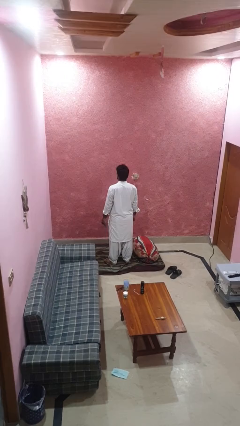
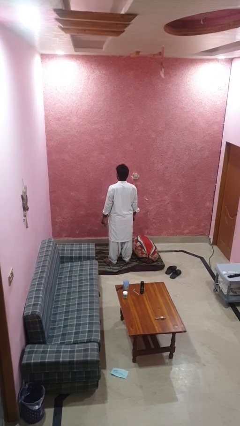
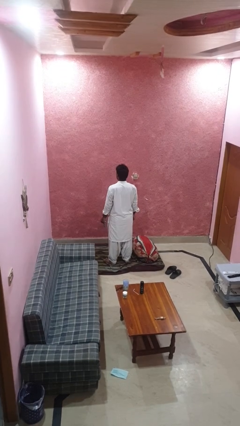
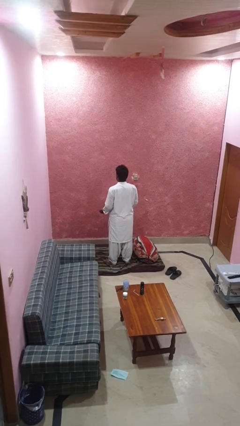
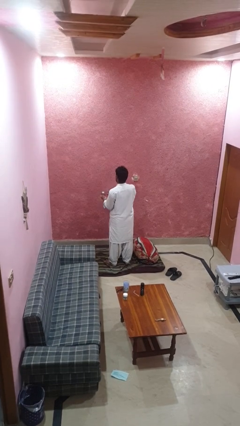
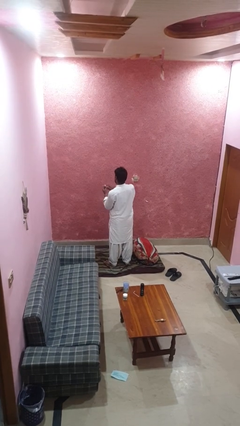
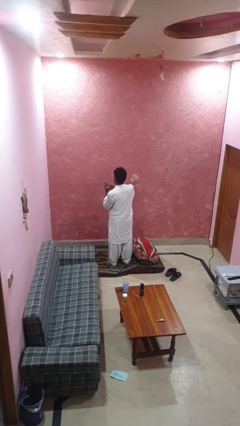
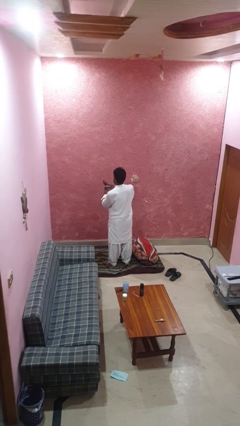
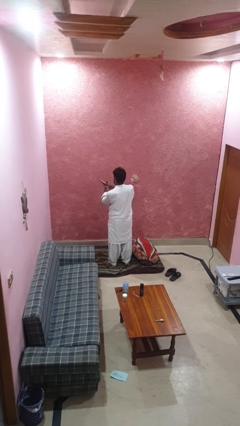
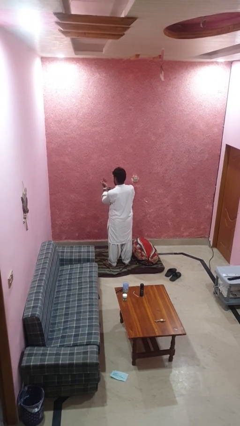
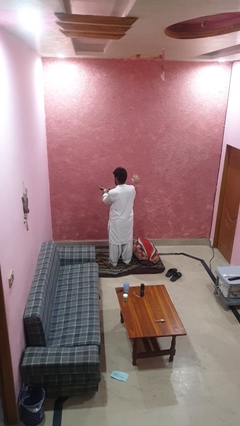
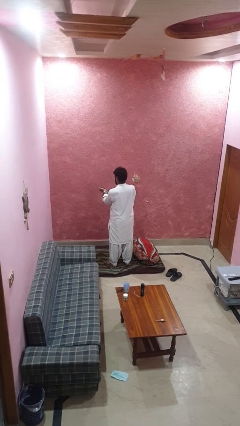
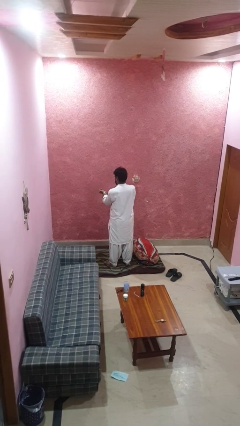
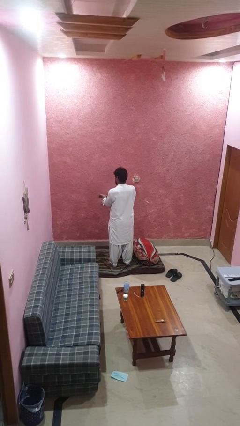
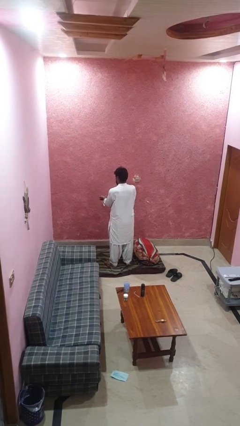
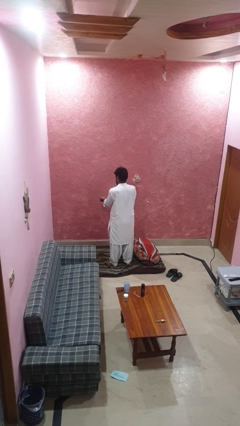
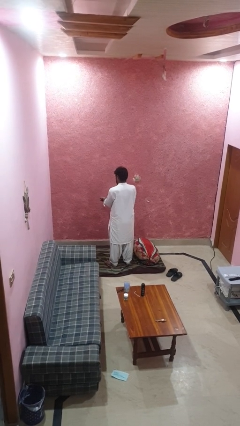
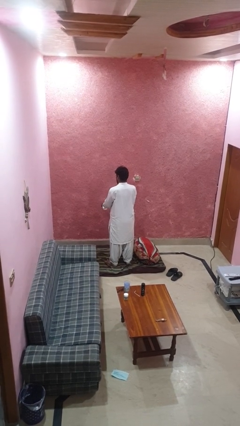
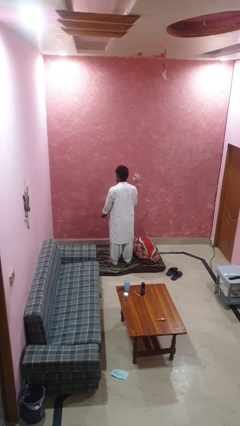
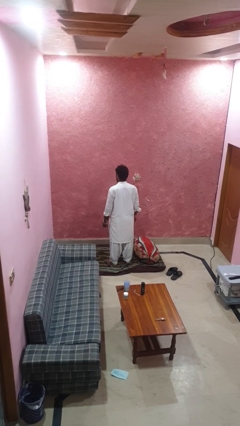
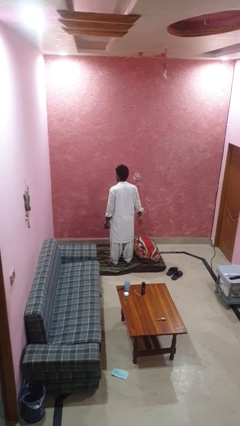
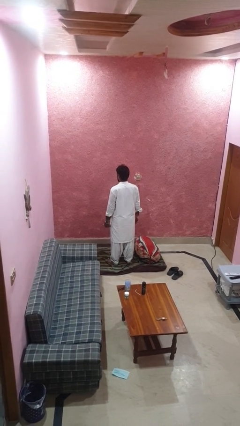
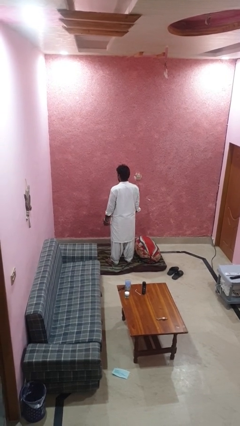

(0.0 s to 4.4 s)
person puts on wristwatch

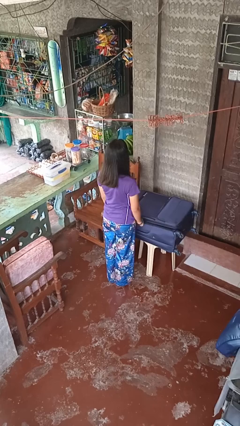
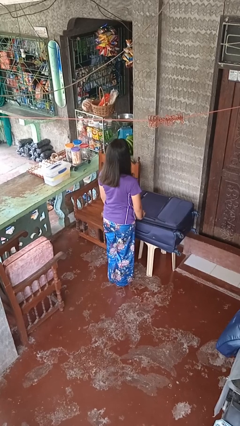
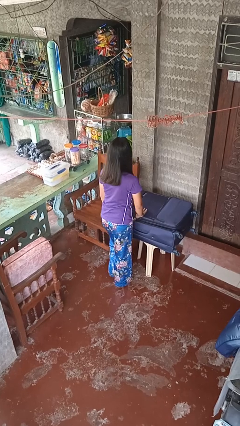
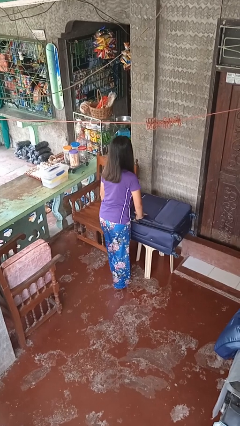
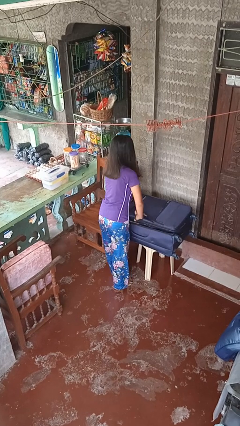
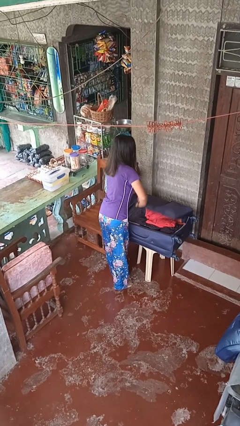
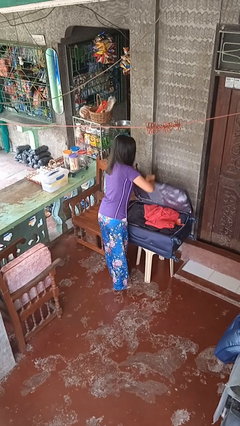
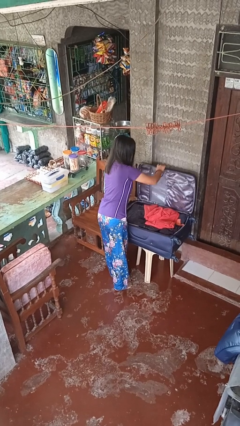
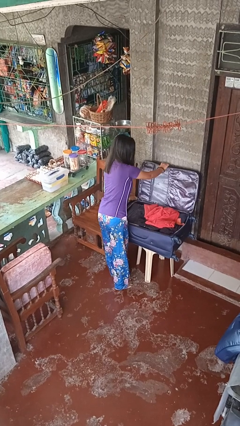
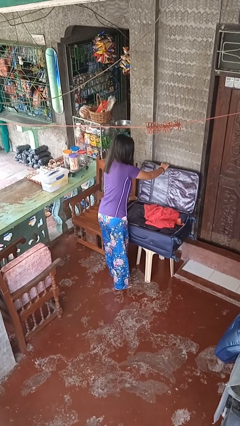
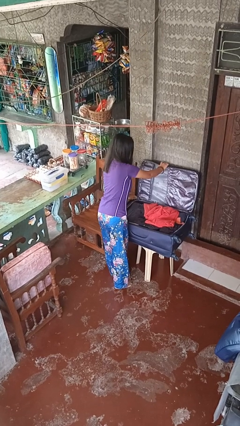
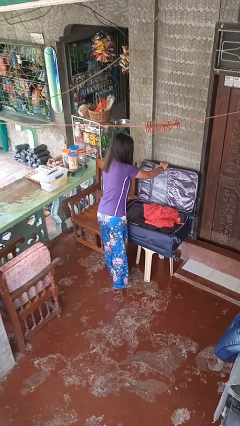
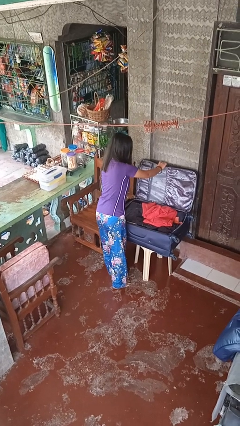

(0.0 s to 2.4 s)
person opens suitcase

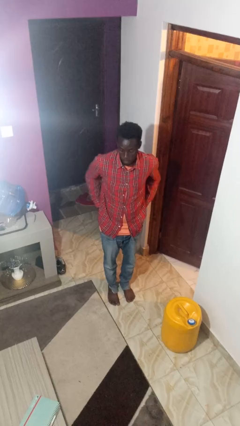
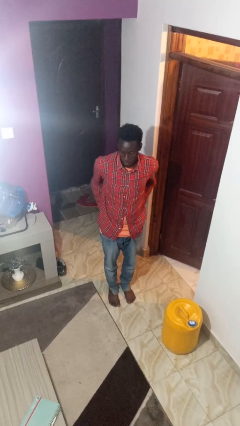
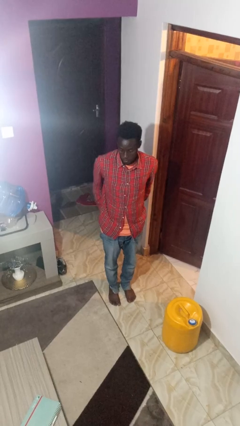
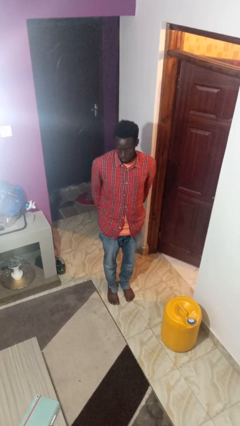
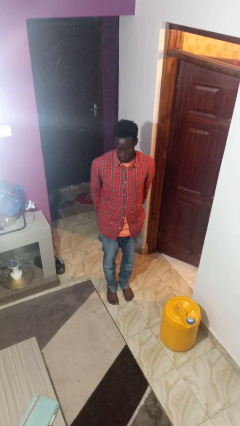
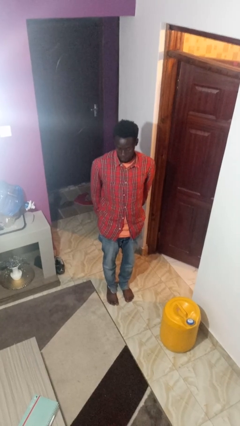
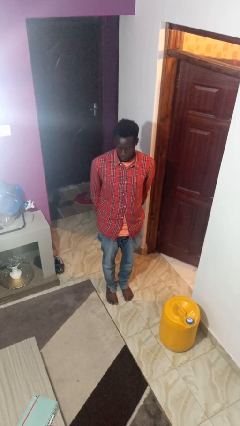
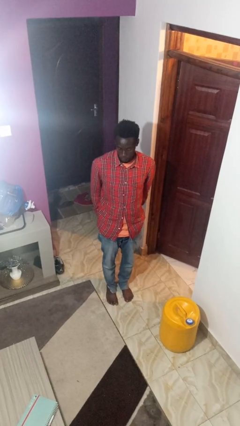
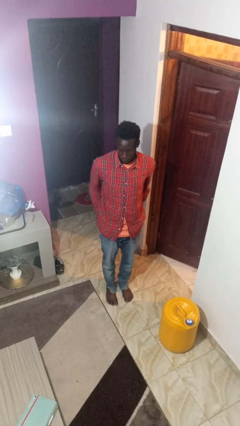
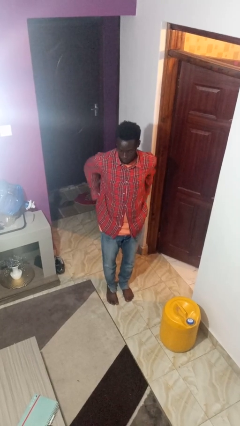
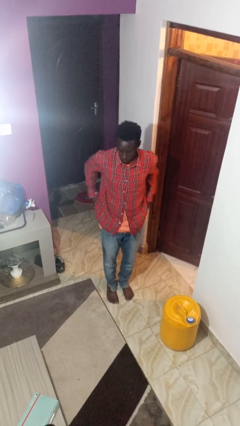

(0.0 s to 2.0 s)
person puts hands in back pockets

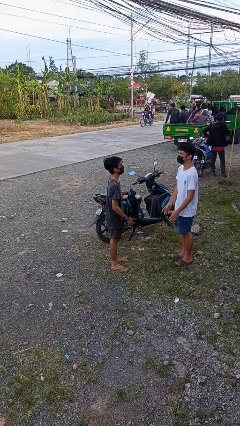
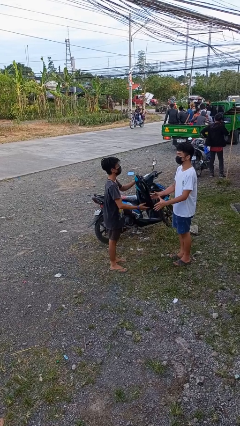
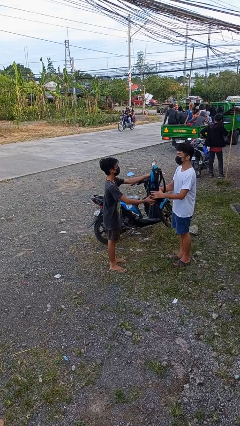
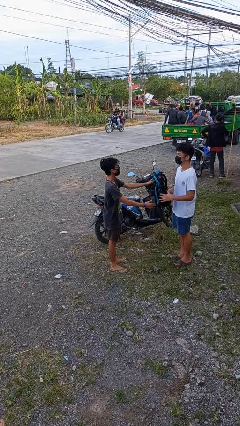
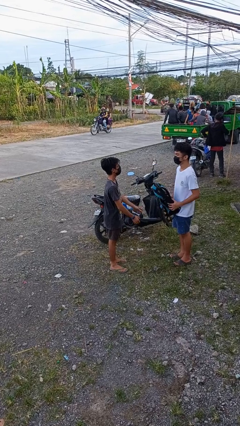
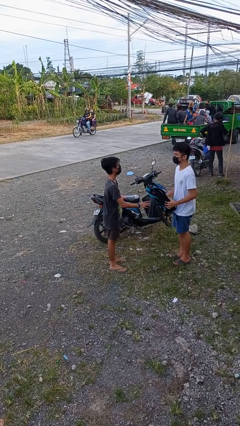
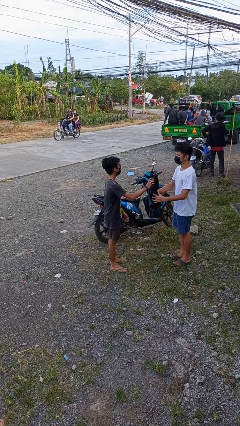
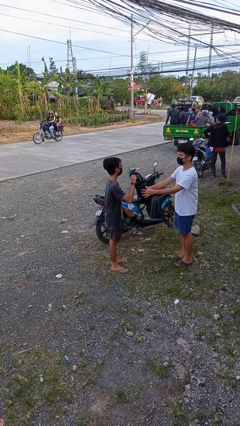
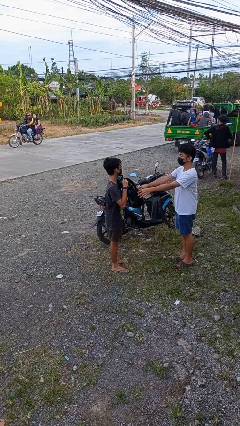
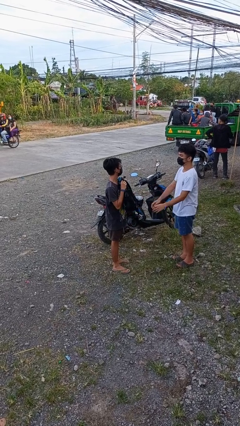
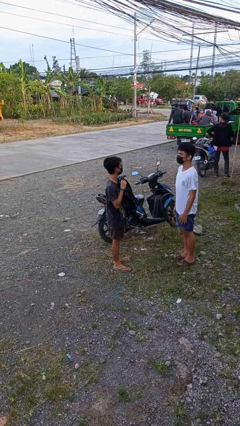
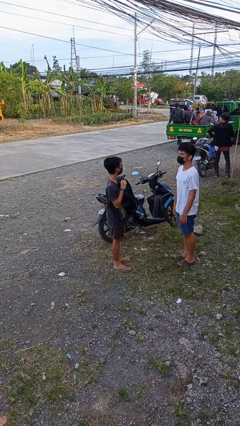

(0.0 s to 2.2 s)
person transfers object to person

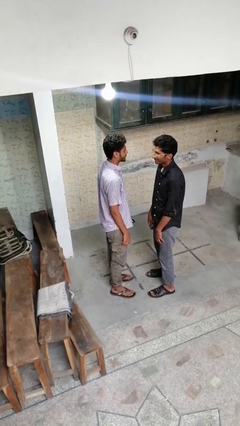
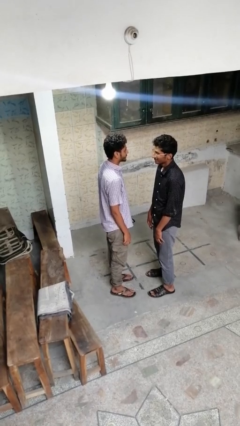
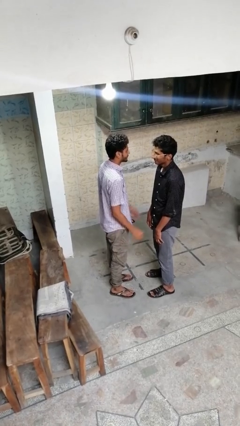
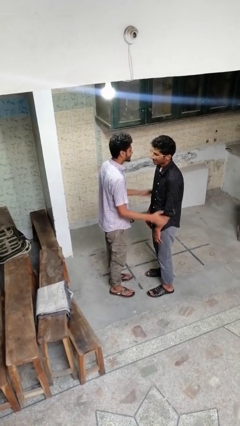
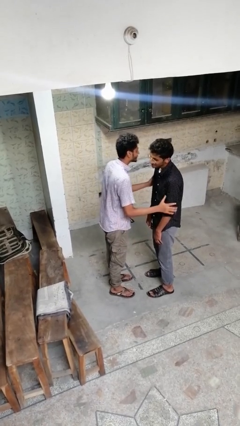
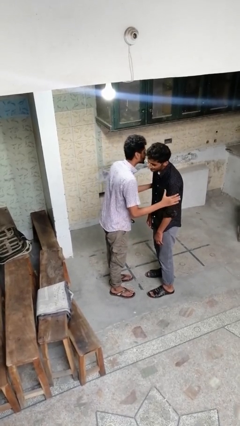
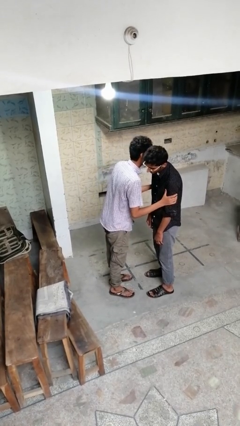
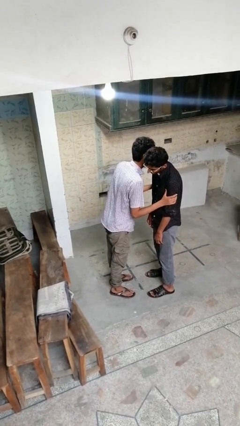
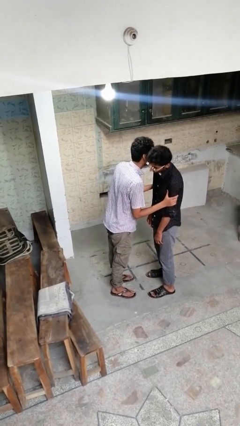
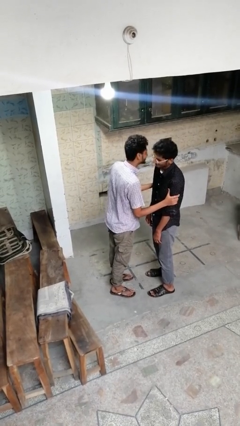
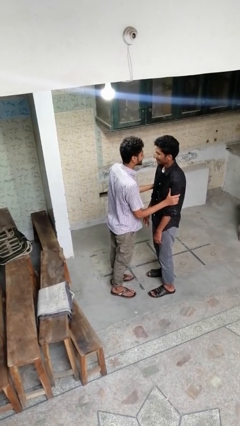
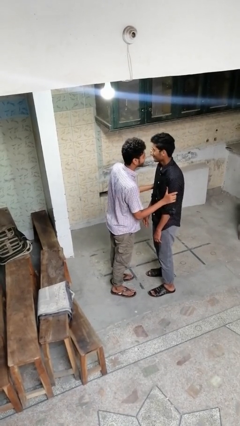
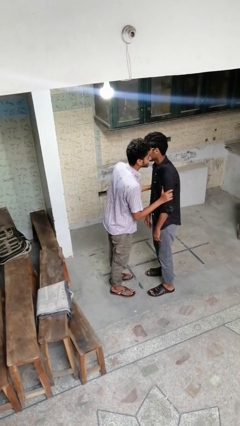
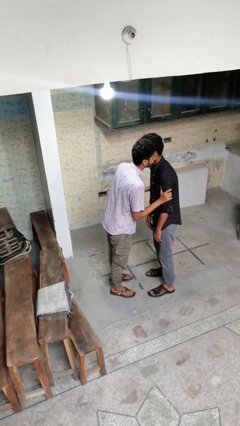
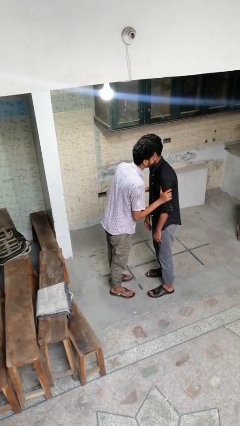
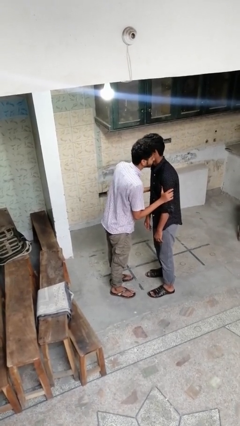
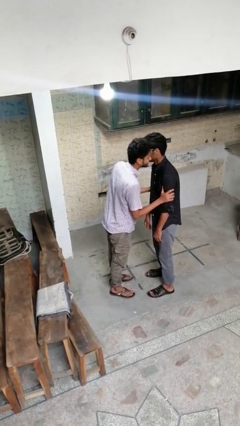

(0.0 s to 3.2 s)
person kisses cheek of person

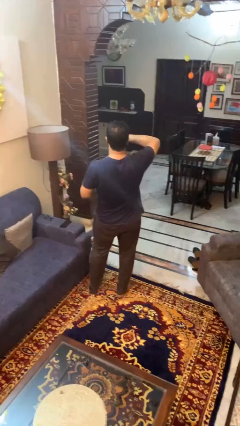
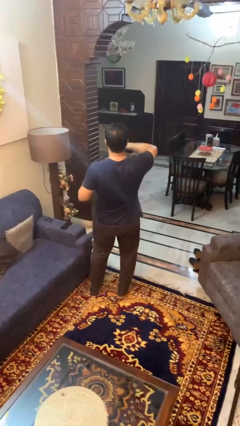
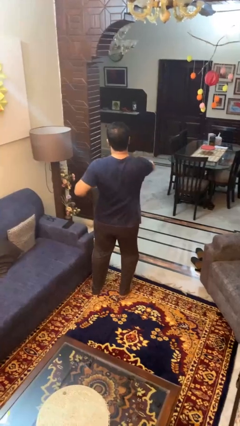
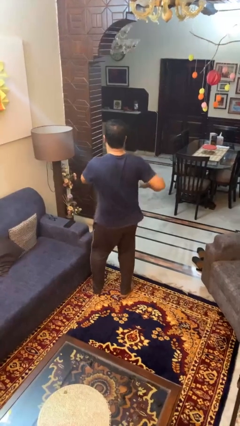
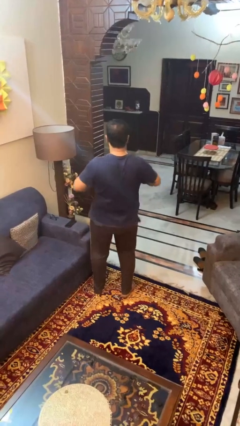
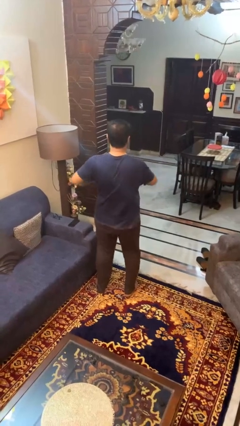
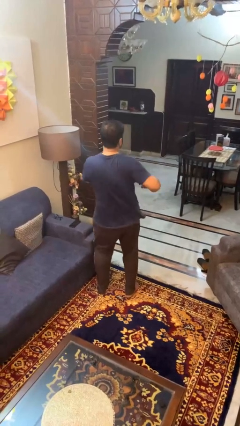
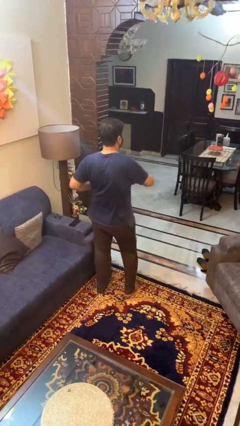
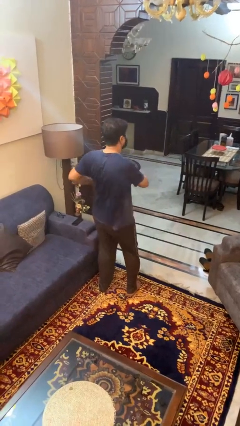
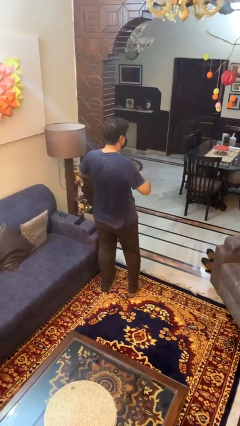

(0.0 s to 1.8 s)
person dances in place

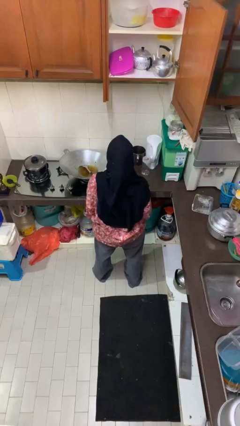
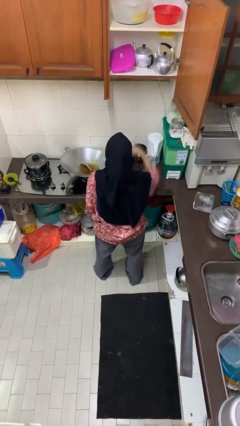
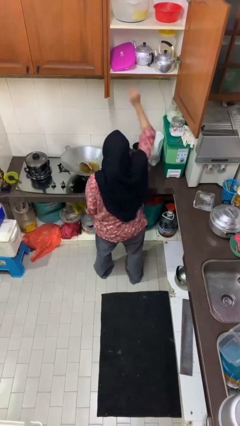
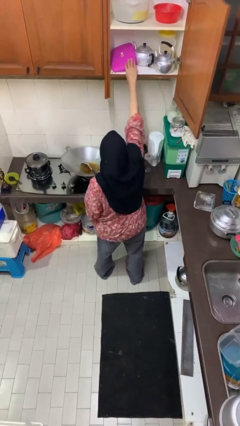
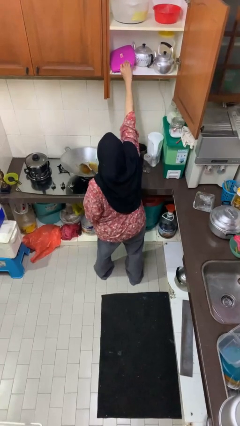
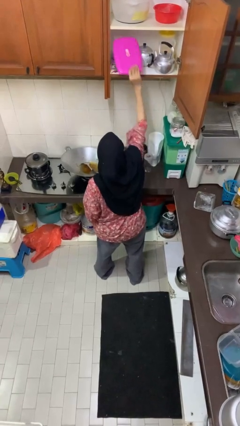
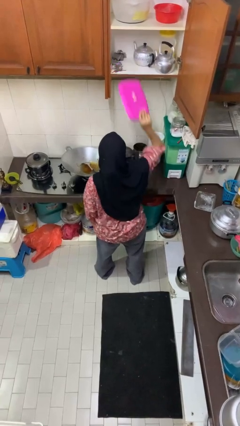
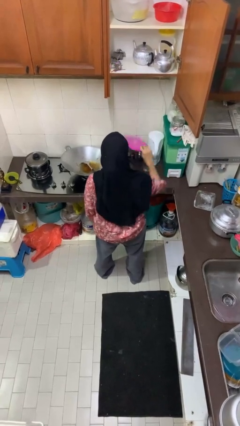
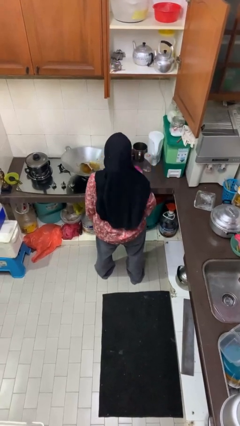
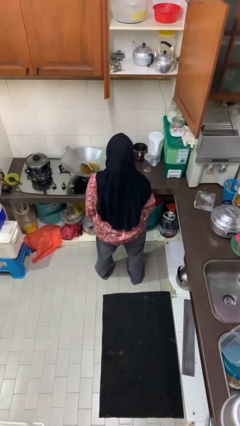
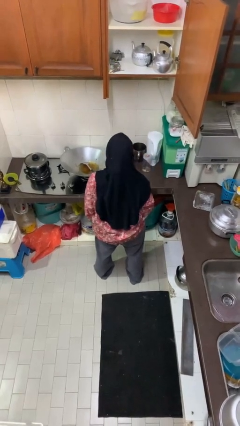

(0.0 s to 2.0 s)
person takes object from cabinet
